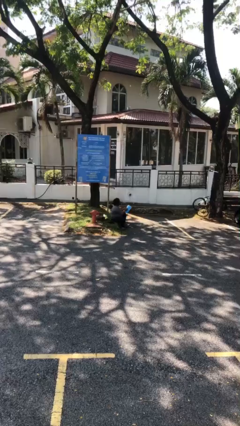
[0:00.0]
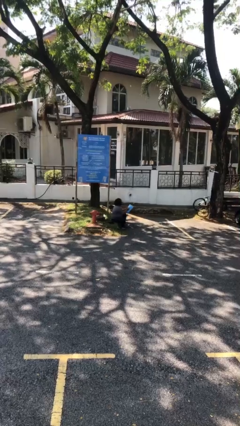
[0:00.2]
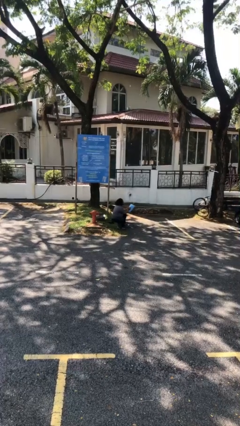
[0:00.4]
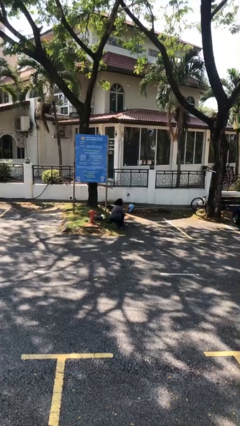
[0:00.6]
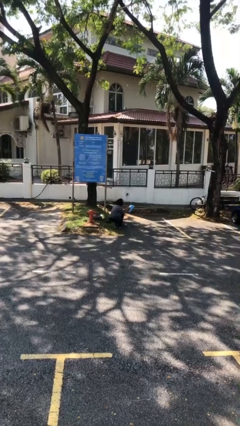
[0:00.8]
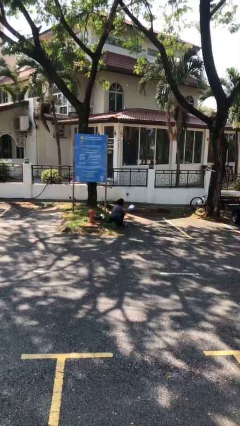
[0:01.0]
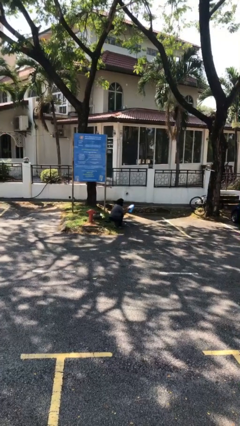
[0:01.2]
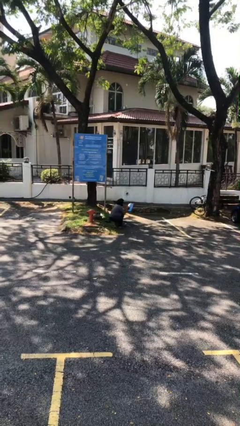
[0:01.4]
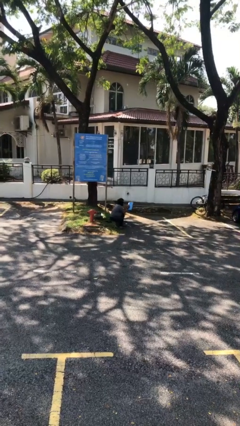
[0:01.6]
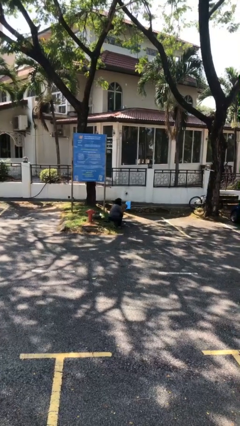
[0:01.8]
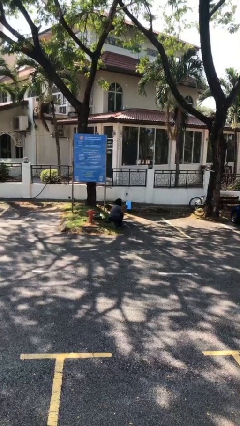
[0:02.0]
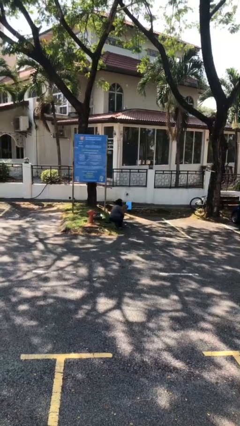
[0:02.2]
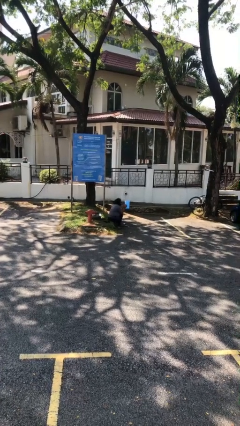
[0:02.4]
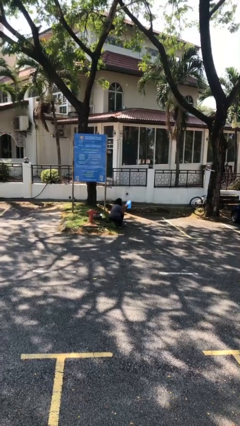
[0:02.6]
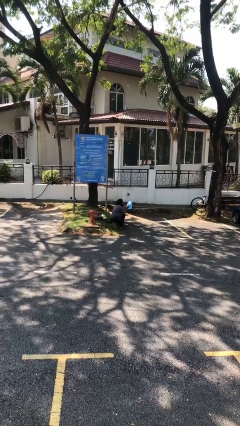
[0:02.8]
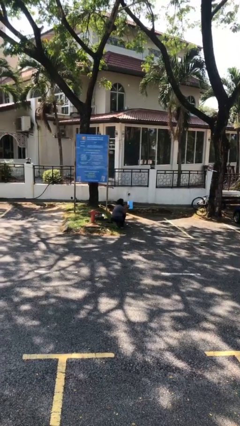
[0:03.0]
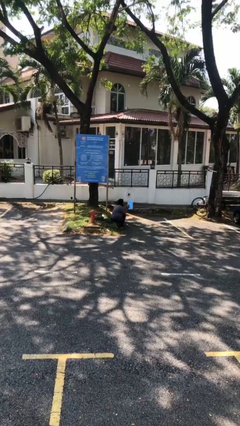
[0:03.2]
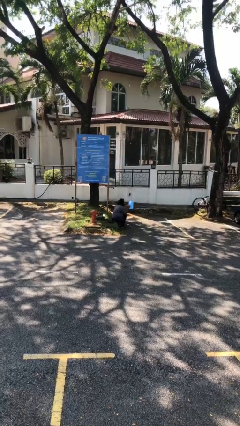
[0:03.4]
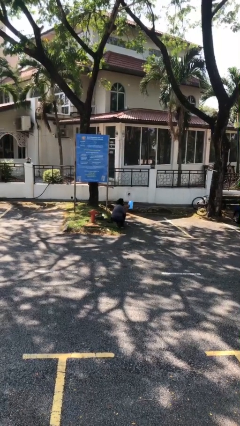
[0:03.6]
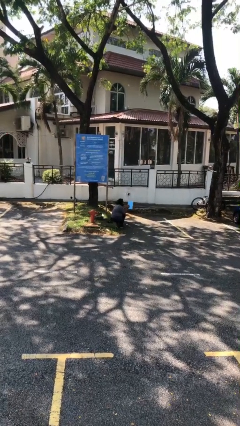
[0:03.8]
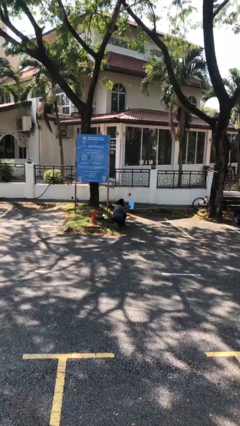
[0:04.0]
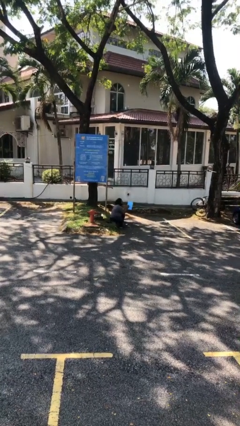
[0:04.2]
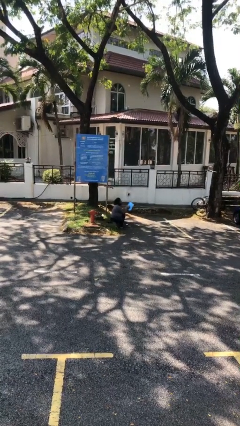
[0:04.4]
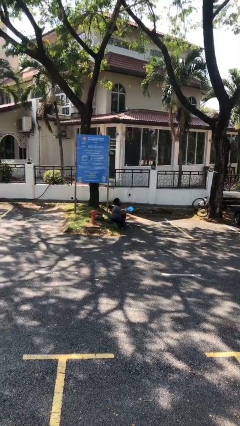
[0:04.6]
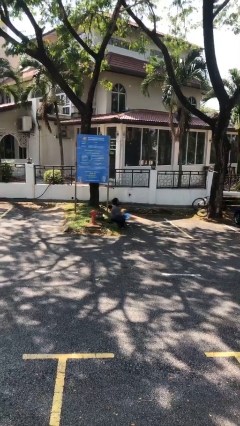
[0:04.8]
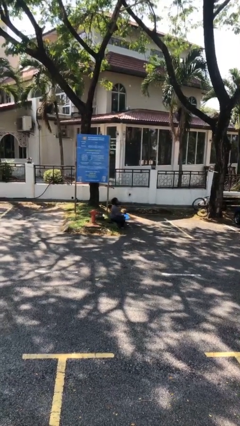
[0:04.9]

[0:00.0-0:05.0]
person reads document

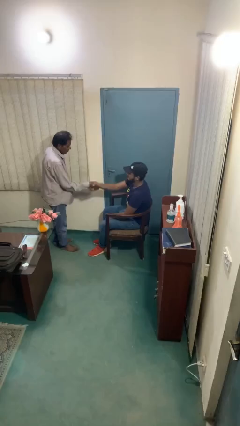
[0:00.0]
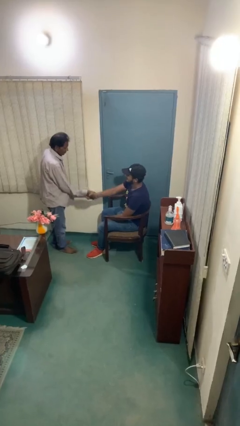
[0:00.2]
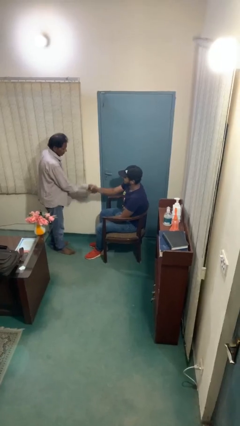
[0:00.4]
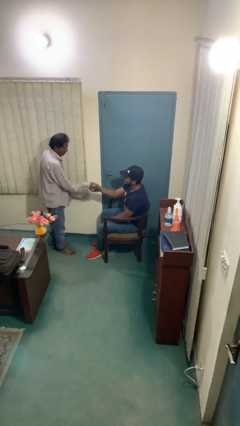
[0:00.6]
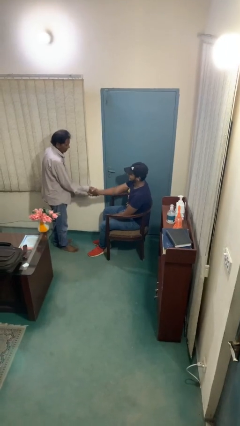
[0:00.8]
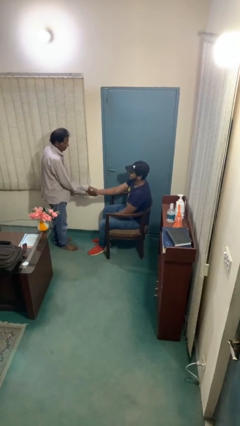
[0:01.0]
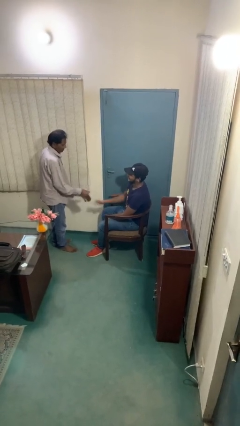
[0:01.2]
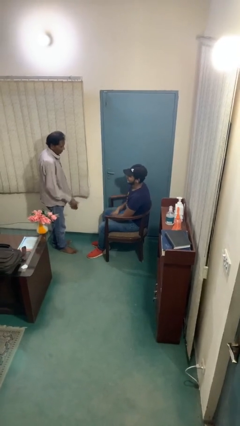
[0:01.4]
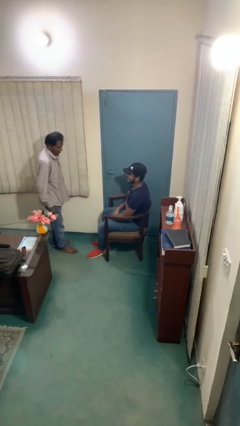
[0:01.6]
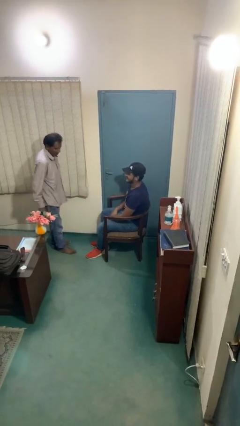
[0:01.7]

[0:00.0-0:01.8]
person shakes hand

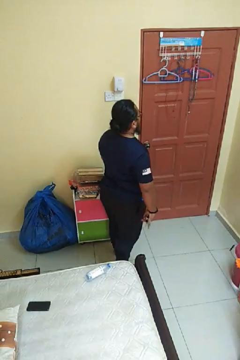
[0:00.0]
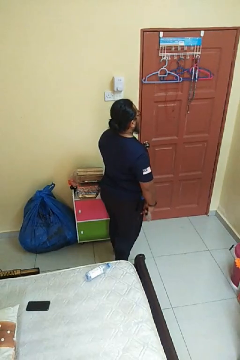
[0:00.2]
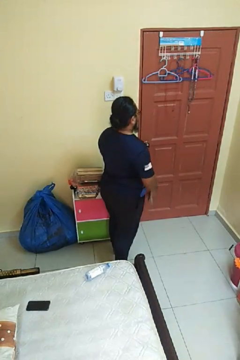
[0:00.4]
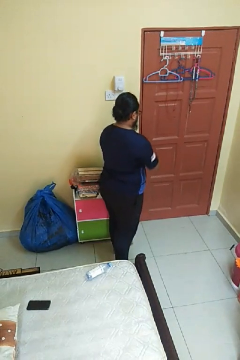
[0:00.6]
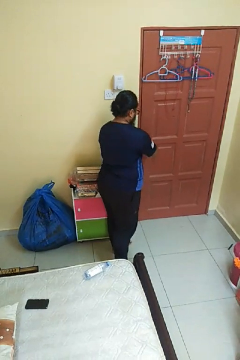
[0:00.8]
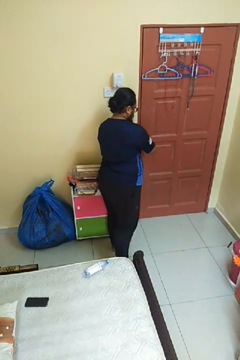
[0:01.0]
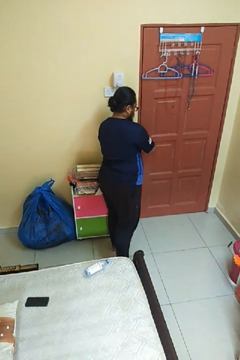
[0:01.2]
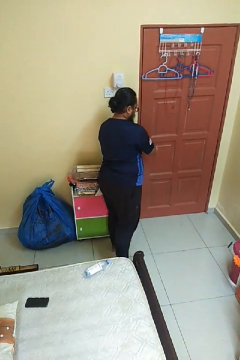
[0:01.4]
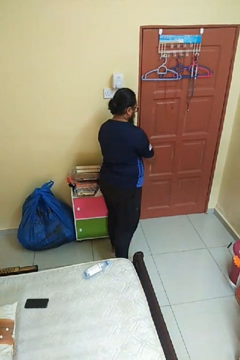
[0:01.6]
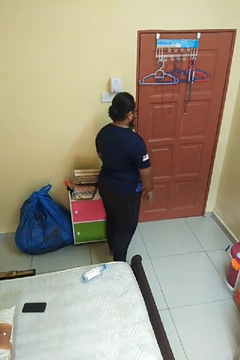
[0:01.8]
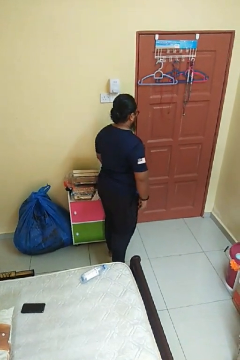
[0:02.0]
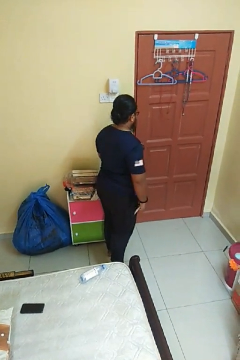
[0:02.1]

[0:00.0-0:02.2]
person unlocks door with keys

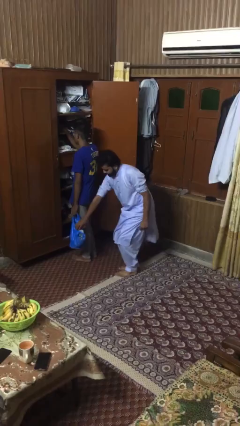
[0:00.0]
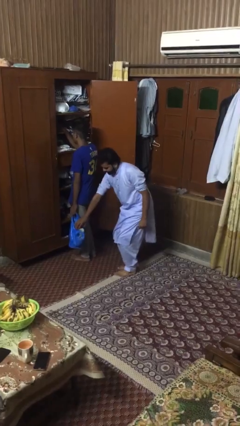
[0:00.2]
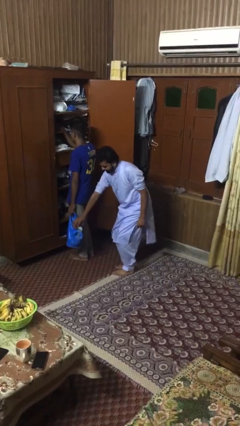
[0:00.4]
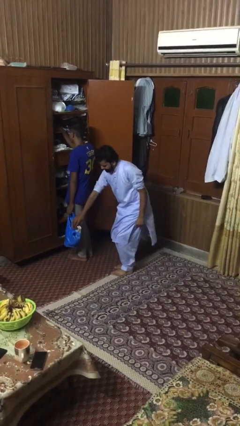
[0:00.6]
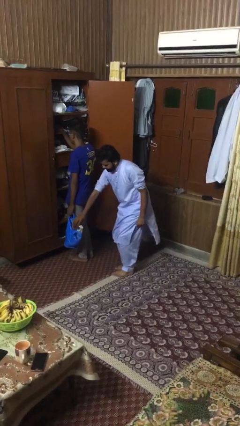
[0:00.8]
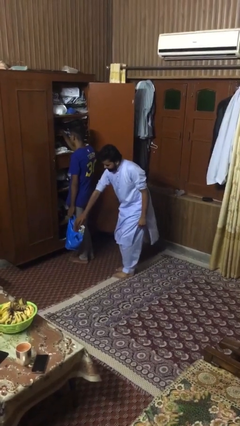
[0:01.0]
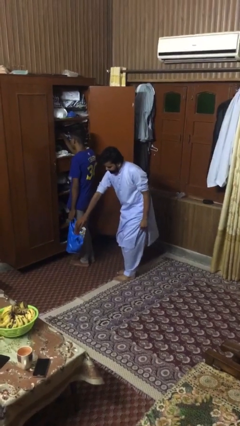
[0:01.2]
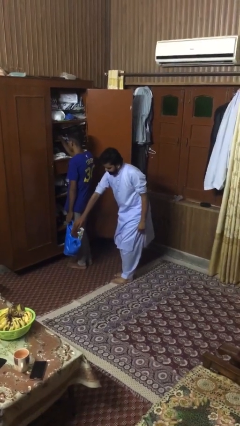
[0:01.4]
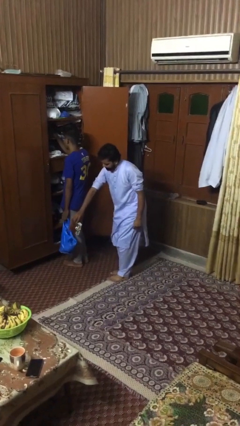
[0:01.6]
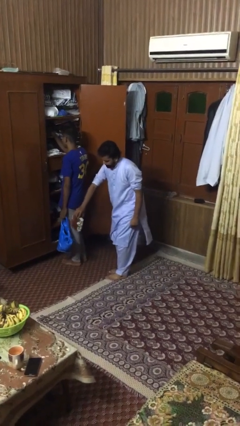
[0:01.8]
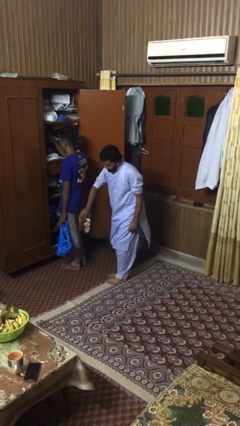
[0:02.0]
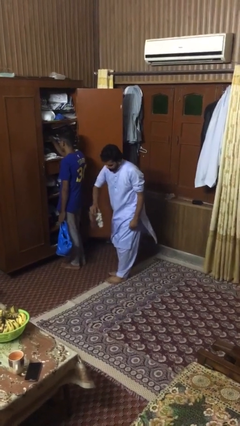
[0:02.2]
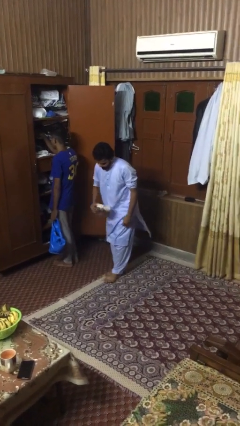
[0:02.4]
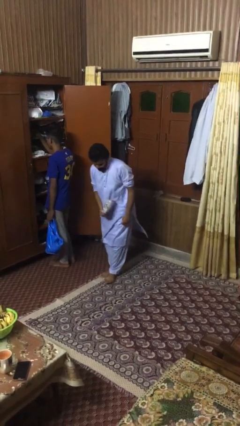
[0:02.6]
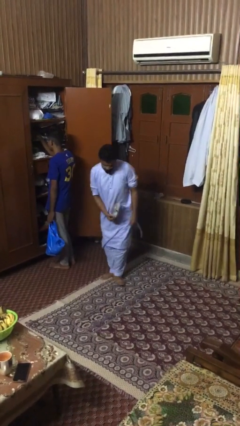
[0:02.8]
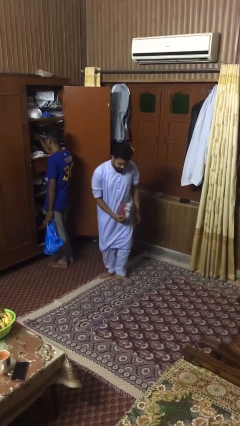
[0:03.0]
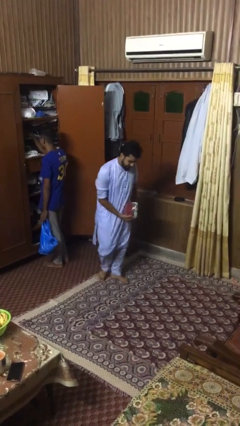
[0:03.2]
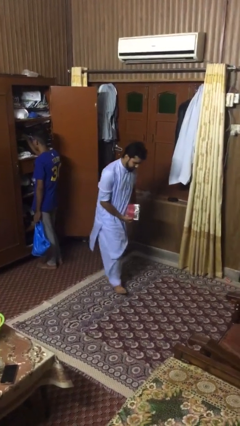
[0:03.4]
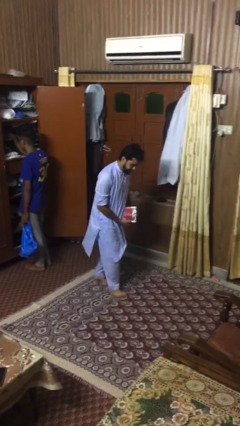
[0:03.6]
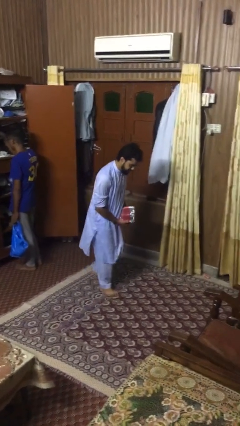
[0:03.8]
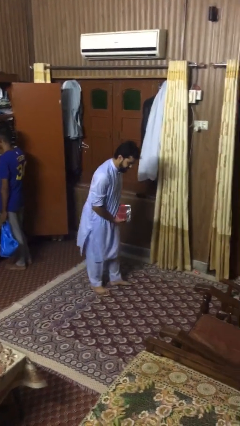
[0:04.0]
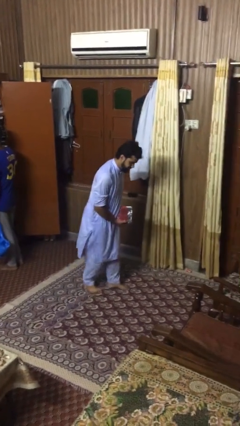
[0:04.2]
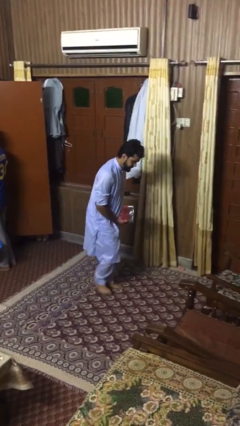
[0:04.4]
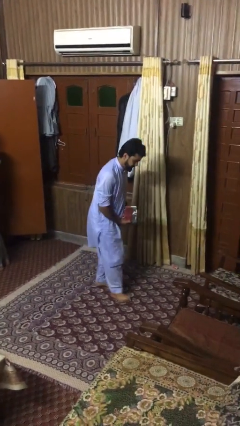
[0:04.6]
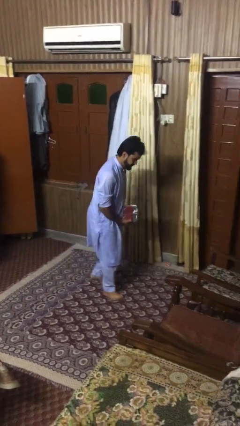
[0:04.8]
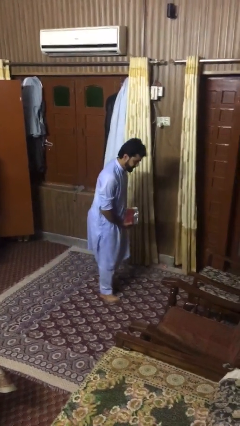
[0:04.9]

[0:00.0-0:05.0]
person steals object from person

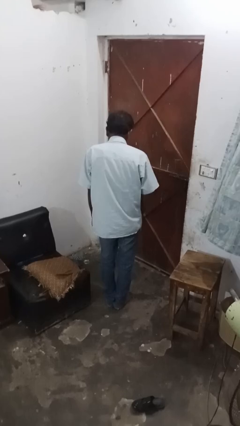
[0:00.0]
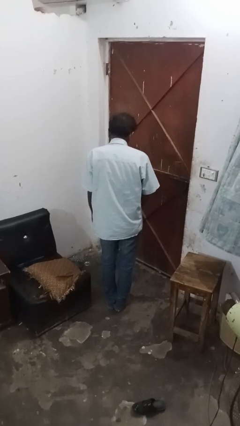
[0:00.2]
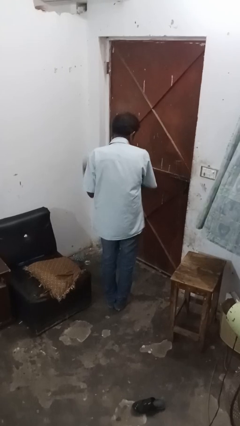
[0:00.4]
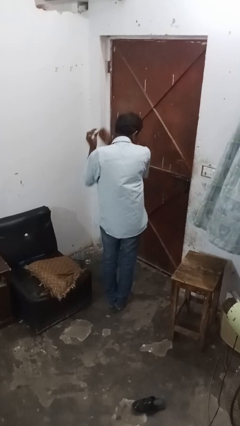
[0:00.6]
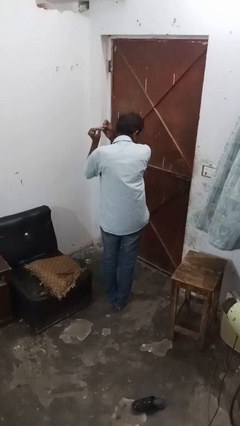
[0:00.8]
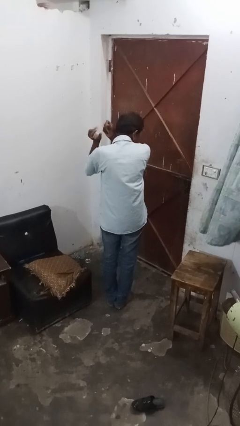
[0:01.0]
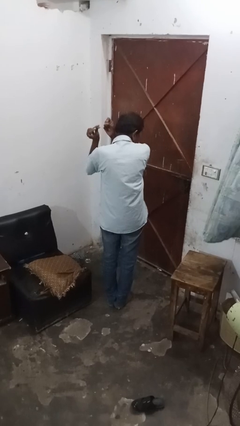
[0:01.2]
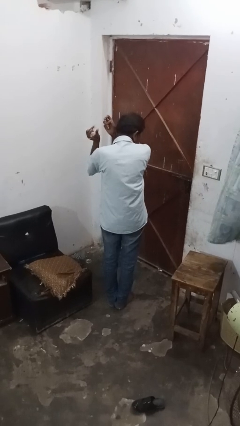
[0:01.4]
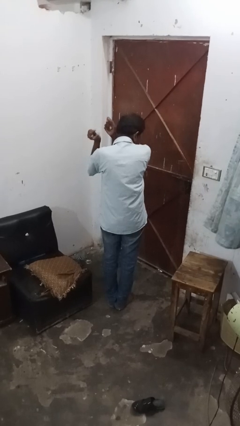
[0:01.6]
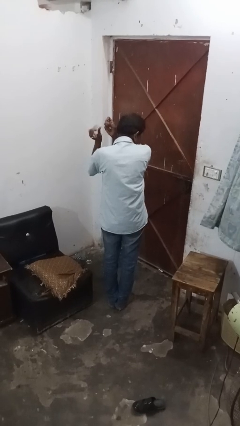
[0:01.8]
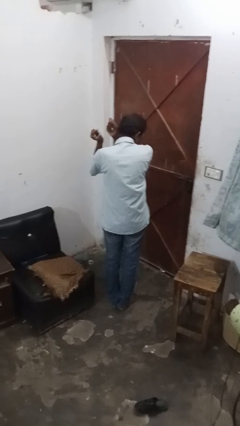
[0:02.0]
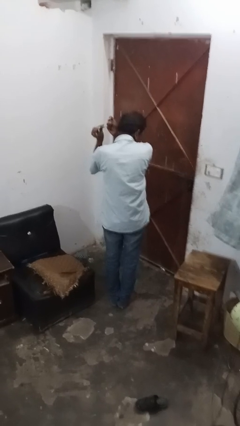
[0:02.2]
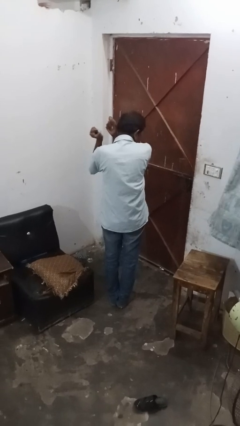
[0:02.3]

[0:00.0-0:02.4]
person snaps fingers

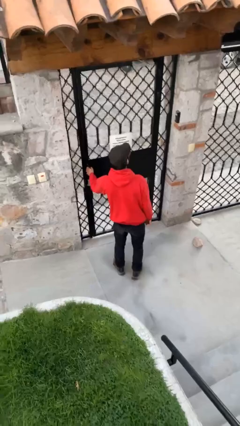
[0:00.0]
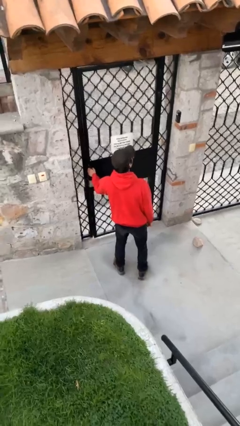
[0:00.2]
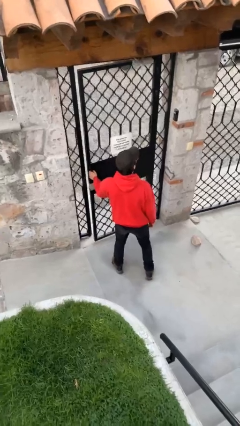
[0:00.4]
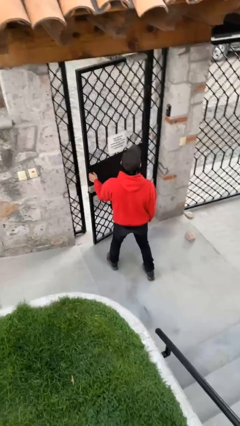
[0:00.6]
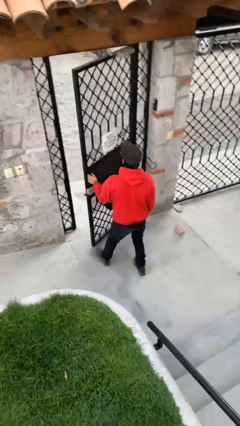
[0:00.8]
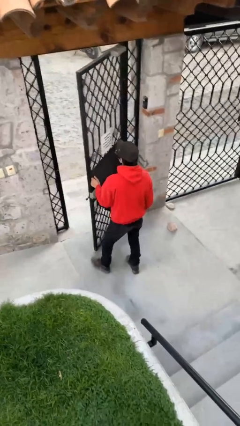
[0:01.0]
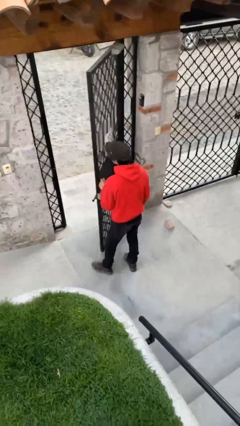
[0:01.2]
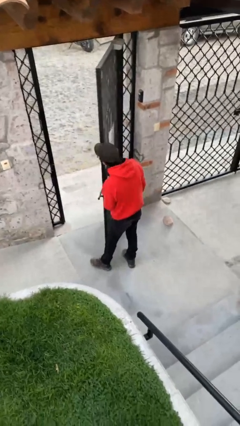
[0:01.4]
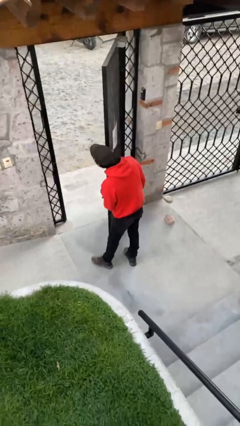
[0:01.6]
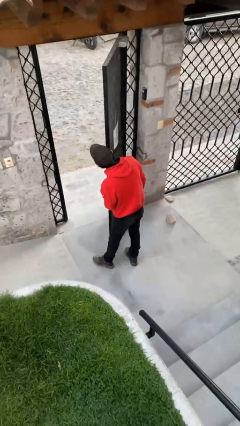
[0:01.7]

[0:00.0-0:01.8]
person opens facility door
